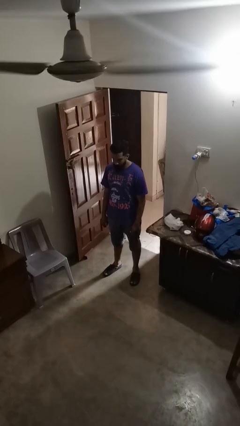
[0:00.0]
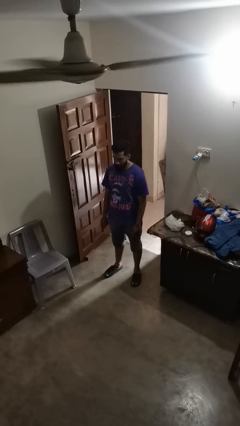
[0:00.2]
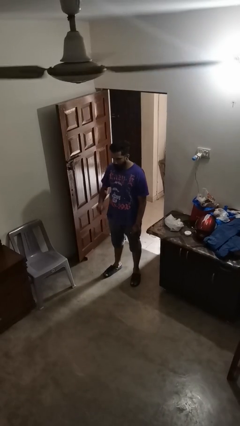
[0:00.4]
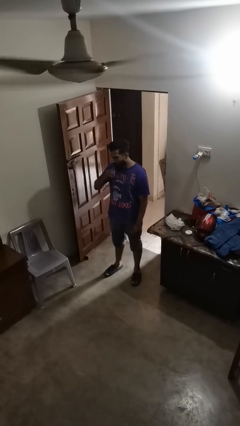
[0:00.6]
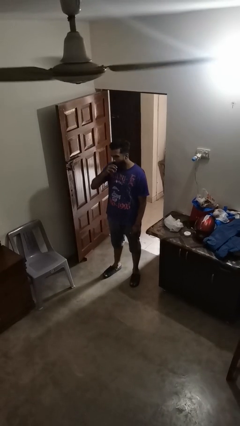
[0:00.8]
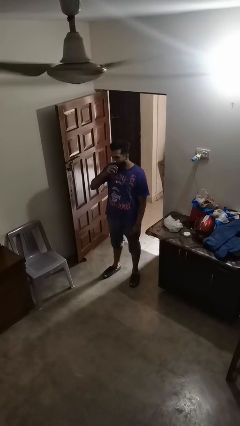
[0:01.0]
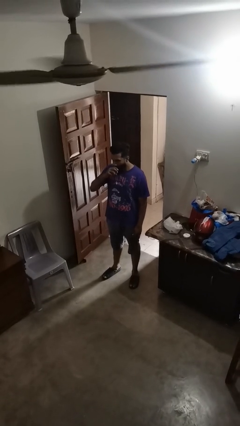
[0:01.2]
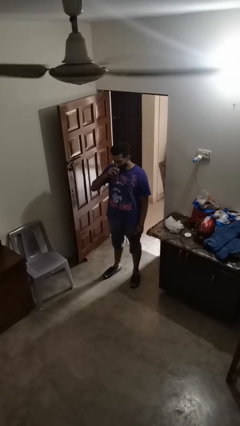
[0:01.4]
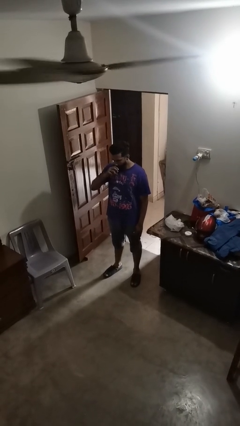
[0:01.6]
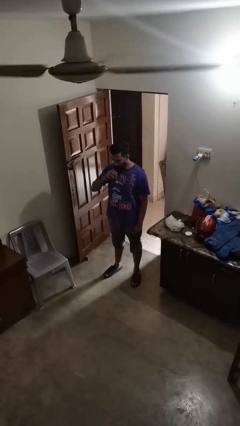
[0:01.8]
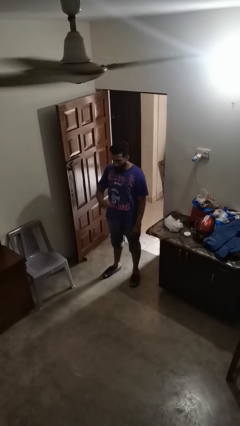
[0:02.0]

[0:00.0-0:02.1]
person eats apple

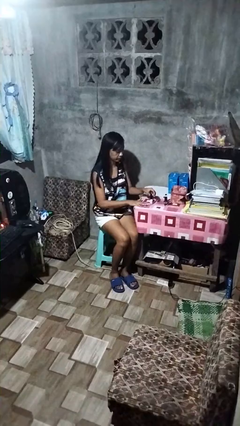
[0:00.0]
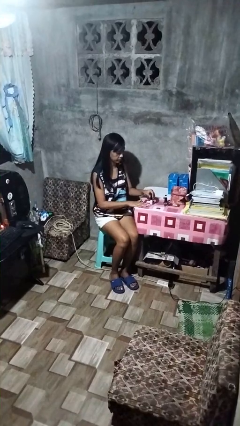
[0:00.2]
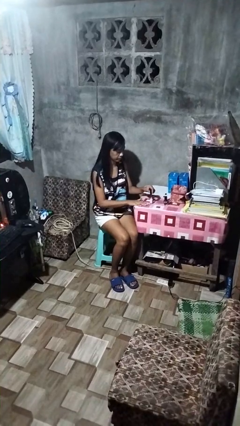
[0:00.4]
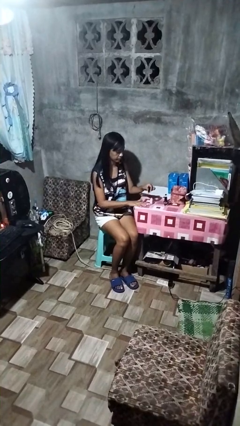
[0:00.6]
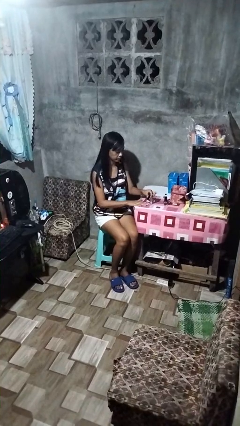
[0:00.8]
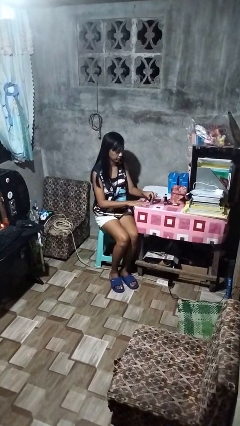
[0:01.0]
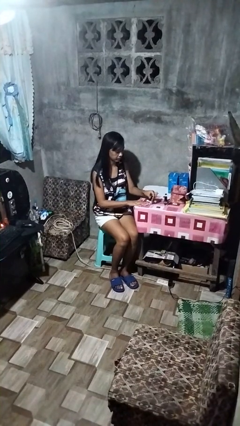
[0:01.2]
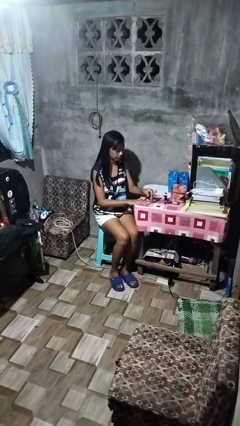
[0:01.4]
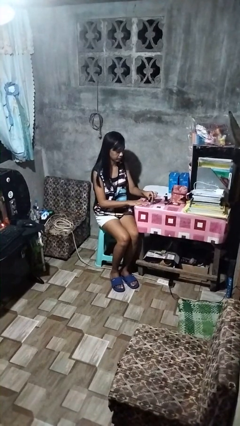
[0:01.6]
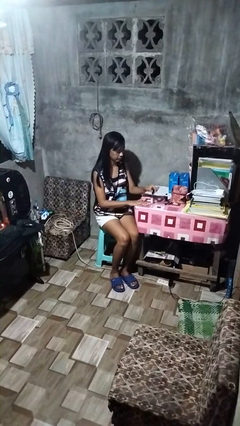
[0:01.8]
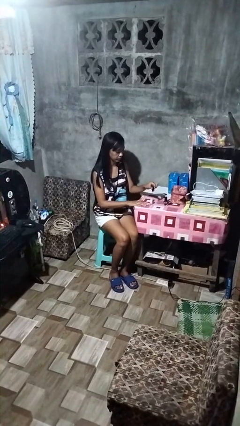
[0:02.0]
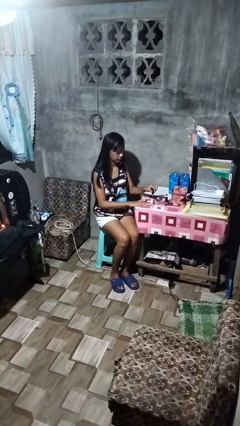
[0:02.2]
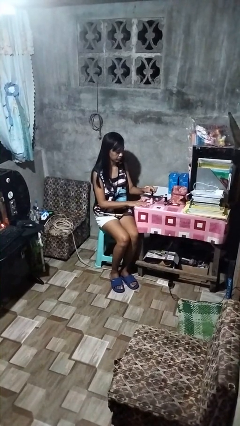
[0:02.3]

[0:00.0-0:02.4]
person paints fingernails

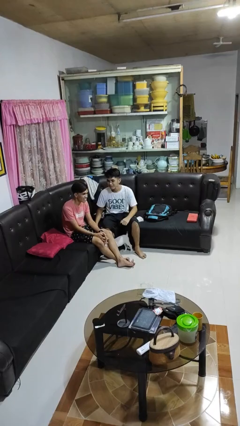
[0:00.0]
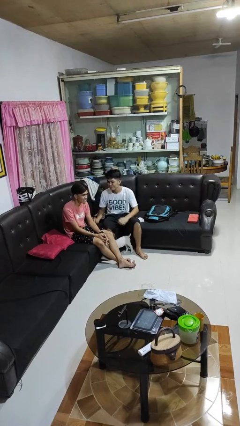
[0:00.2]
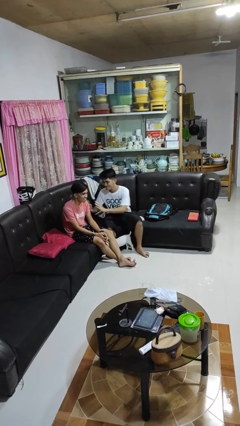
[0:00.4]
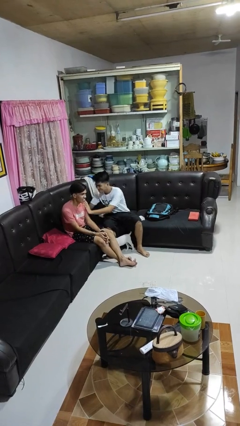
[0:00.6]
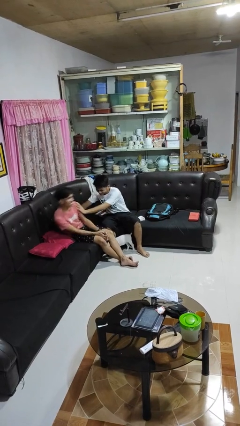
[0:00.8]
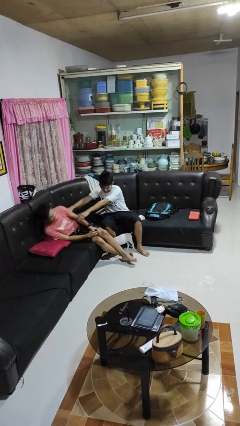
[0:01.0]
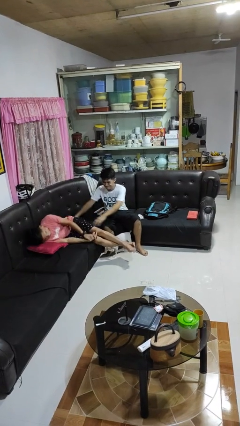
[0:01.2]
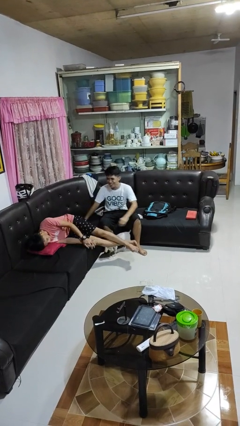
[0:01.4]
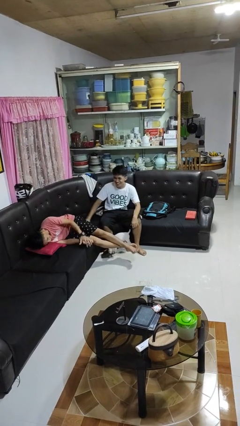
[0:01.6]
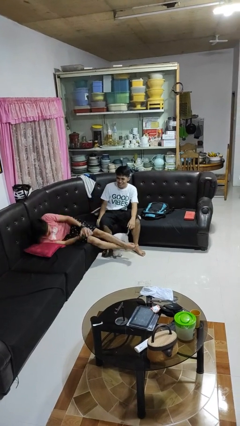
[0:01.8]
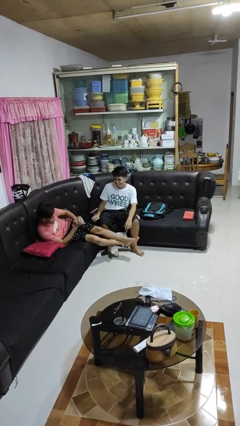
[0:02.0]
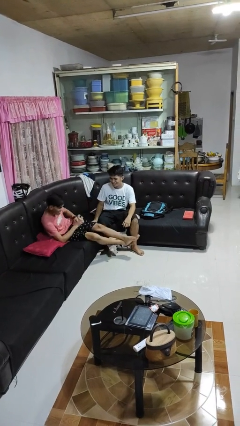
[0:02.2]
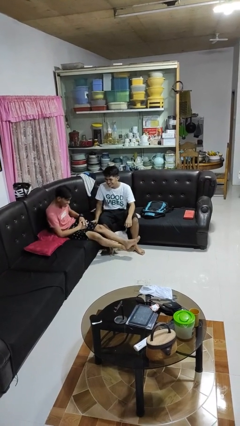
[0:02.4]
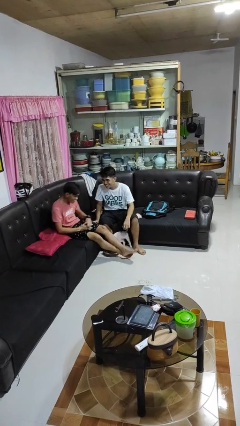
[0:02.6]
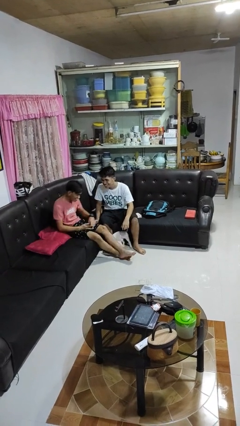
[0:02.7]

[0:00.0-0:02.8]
person shoves person

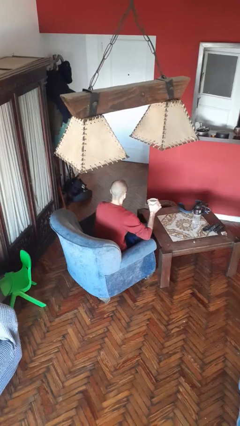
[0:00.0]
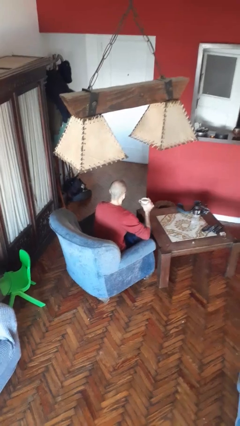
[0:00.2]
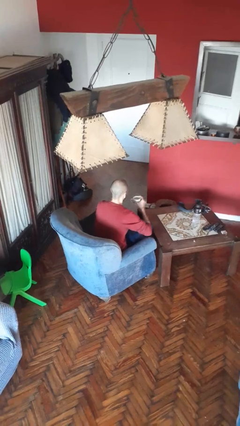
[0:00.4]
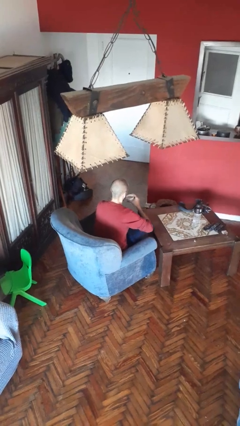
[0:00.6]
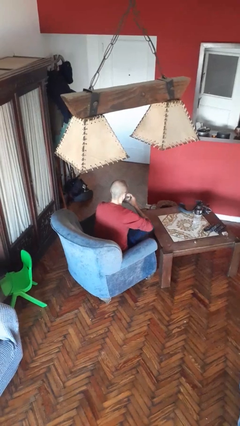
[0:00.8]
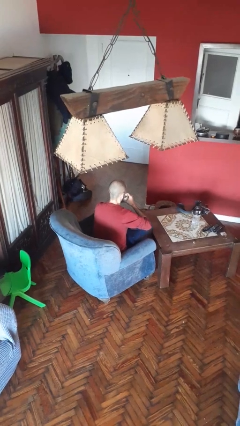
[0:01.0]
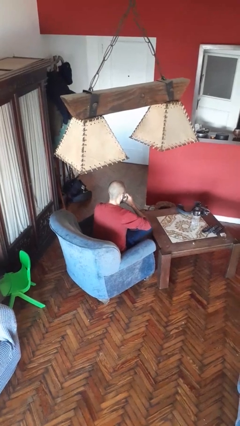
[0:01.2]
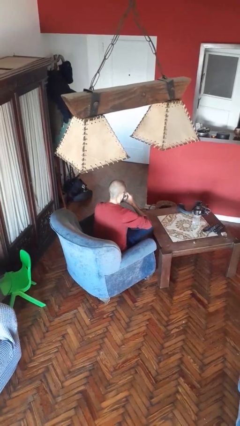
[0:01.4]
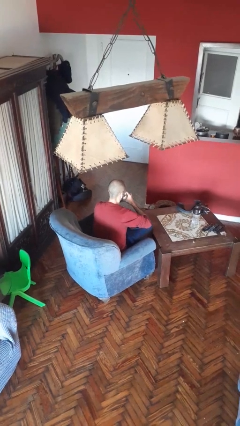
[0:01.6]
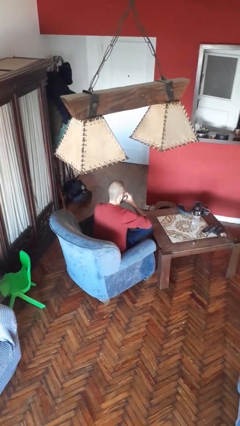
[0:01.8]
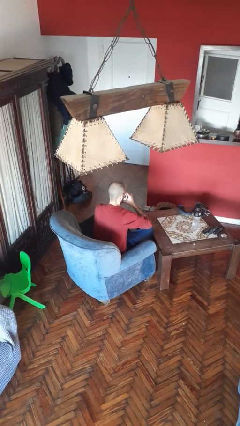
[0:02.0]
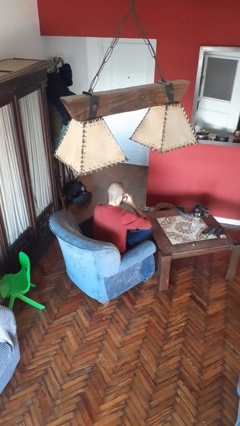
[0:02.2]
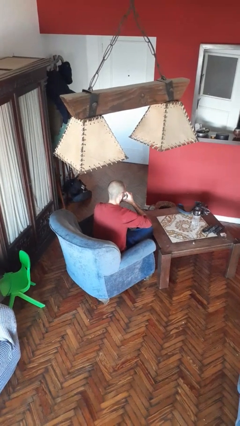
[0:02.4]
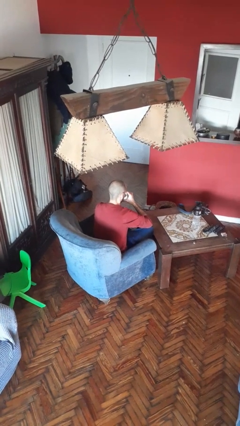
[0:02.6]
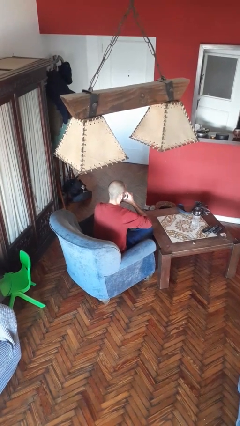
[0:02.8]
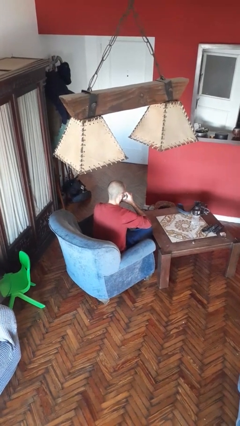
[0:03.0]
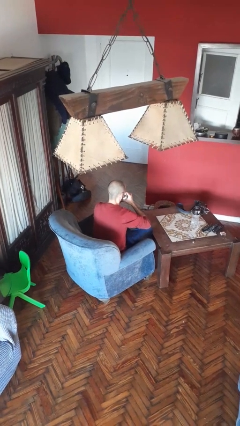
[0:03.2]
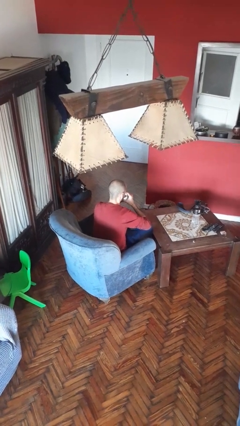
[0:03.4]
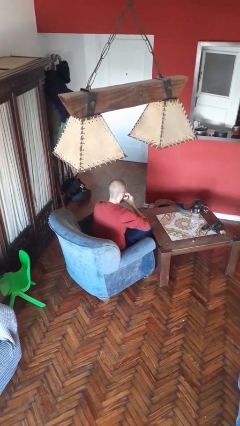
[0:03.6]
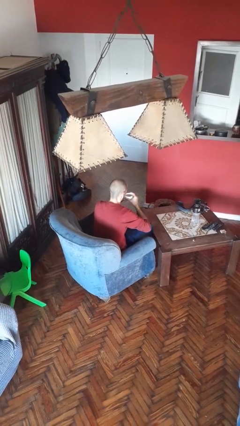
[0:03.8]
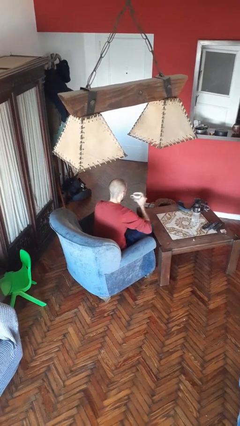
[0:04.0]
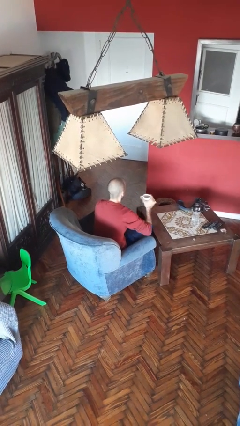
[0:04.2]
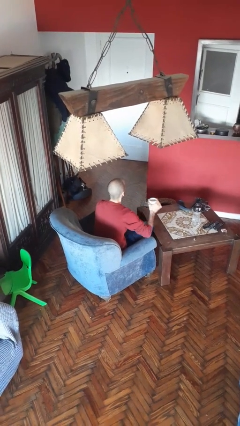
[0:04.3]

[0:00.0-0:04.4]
person drinks from mug

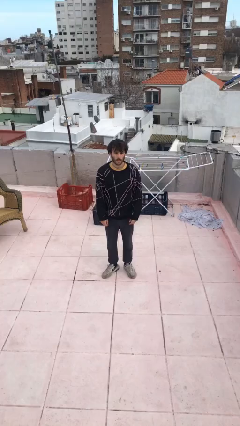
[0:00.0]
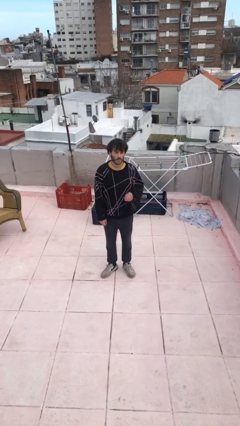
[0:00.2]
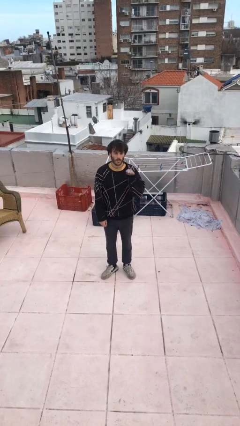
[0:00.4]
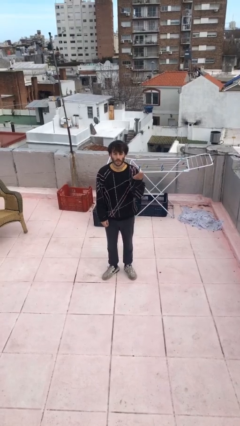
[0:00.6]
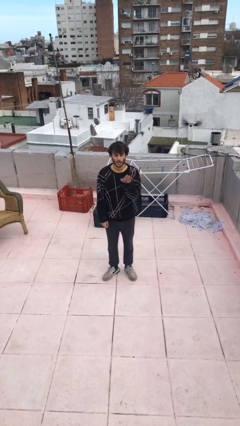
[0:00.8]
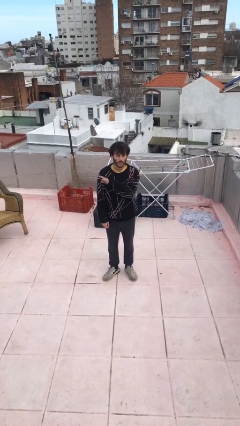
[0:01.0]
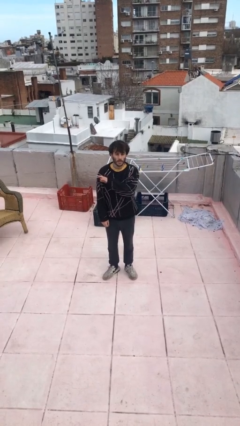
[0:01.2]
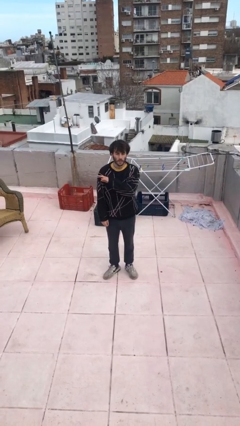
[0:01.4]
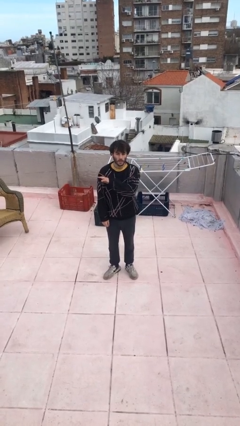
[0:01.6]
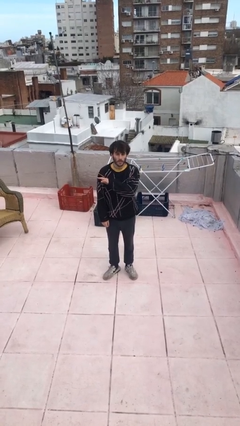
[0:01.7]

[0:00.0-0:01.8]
person gestures swipe right

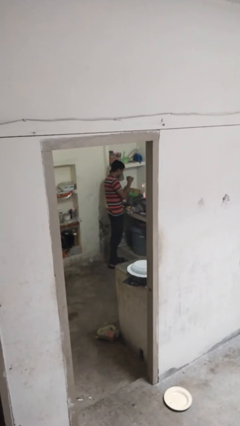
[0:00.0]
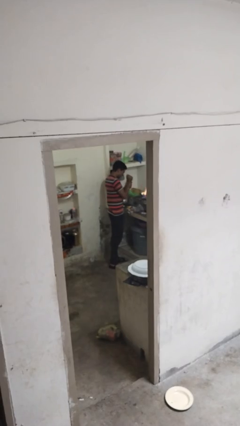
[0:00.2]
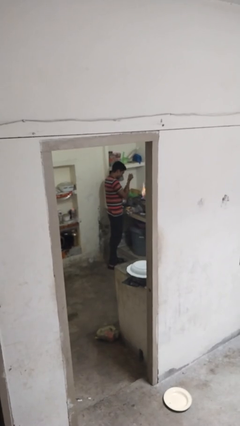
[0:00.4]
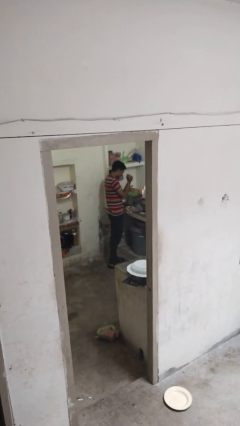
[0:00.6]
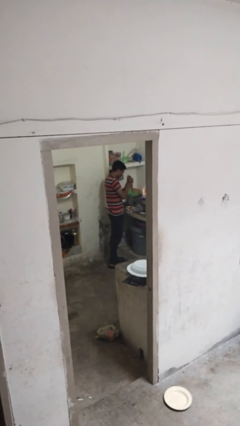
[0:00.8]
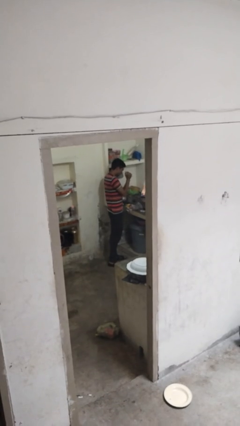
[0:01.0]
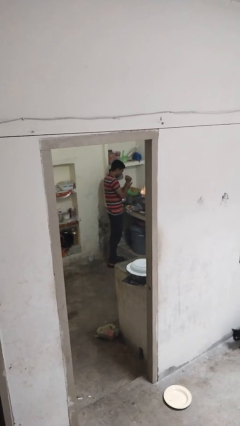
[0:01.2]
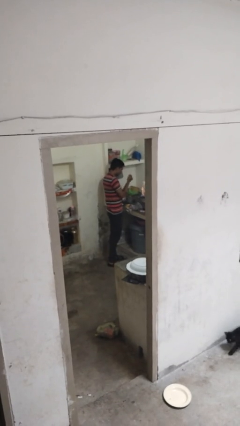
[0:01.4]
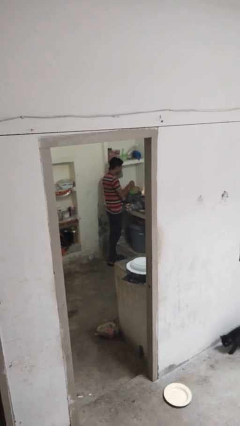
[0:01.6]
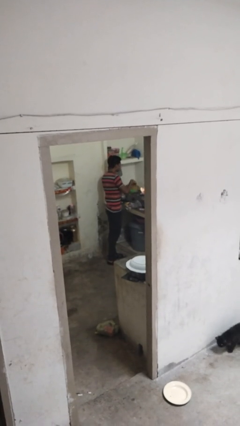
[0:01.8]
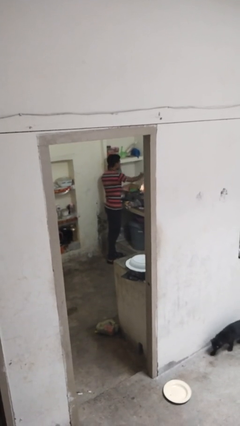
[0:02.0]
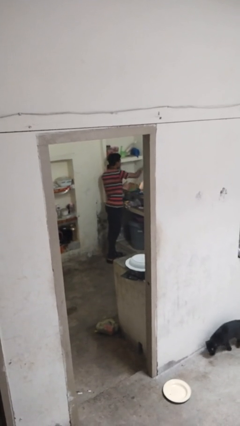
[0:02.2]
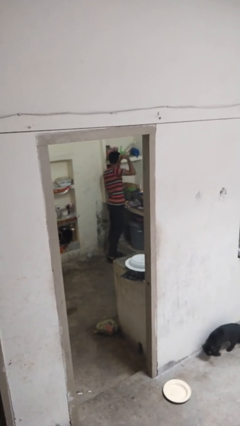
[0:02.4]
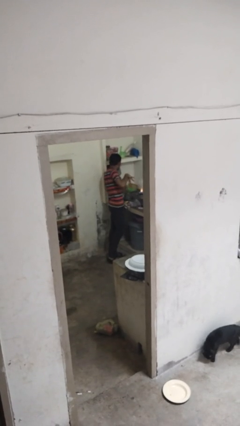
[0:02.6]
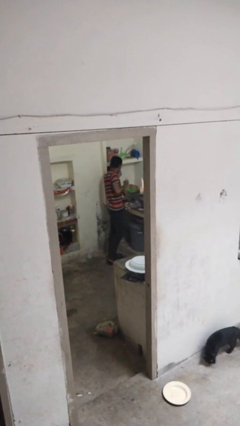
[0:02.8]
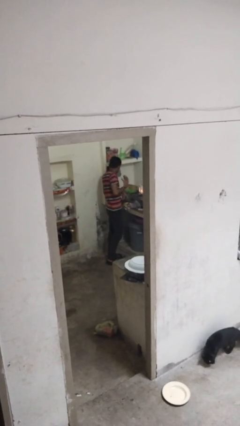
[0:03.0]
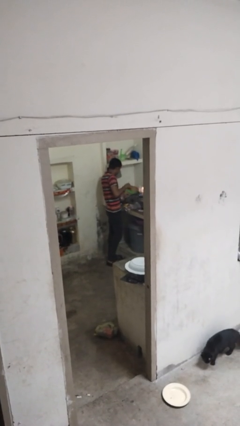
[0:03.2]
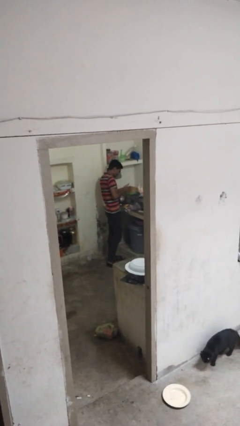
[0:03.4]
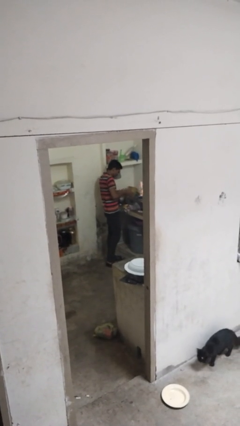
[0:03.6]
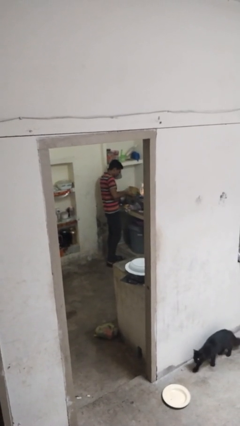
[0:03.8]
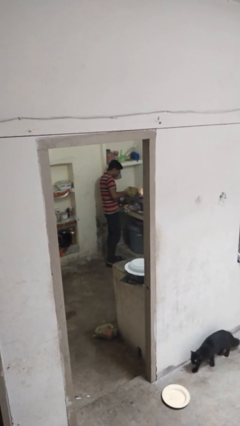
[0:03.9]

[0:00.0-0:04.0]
person burns hand
